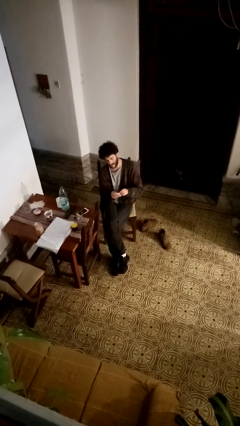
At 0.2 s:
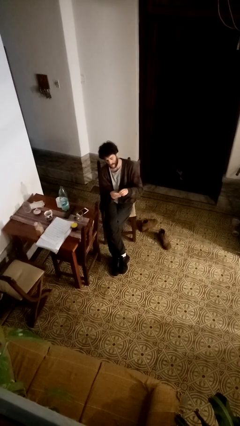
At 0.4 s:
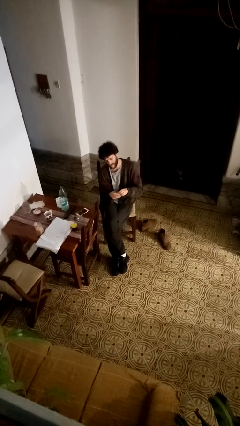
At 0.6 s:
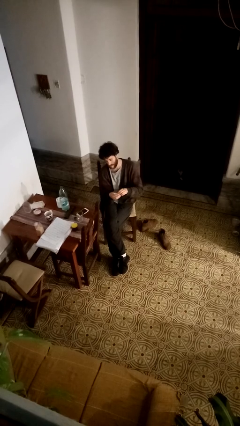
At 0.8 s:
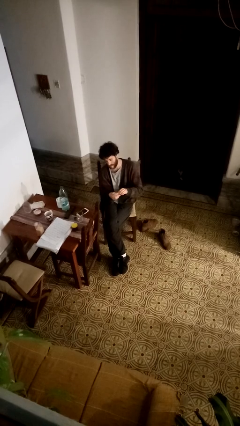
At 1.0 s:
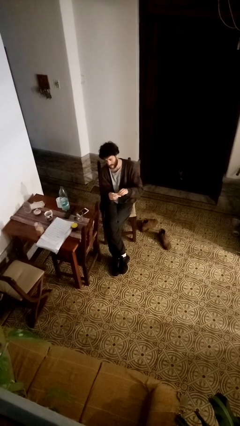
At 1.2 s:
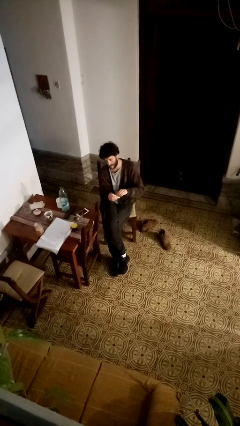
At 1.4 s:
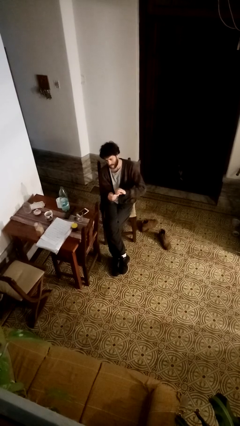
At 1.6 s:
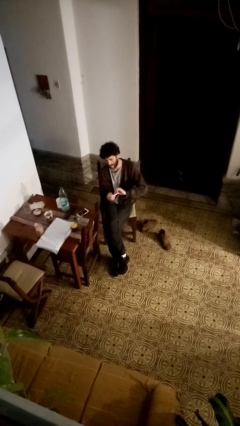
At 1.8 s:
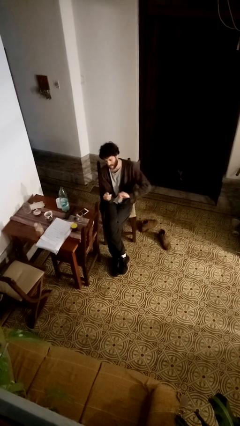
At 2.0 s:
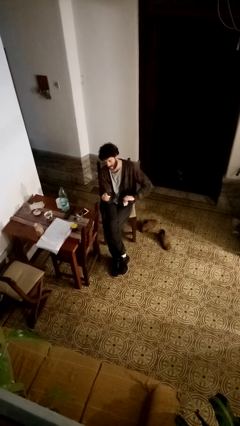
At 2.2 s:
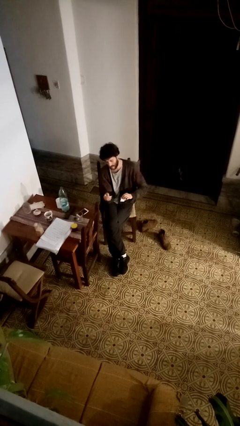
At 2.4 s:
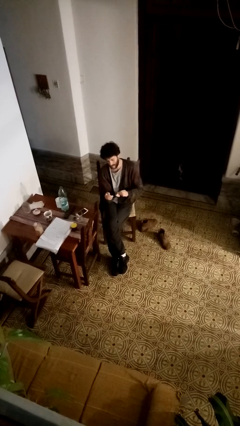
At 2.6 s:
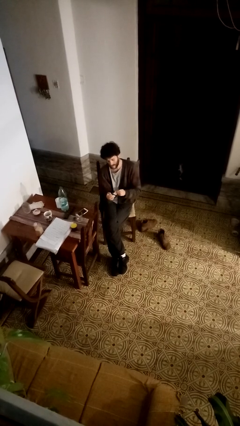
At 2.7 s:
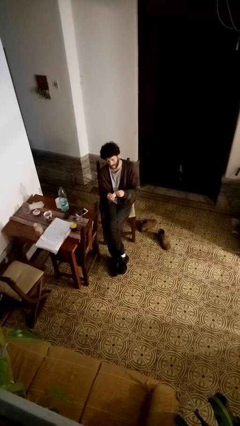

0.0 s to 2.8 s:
person tears paper

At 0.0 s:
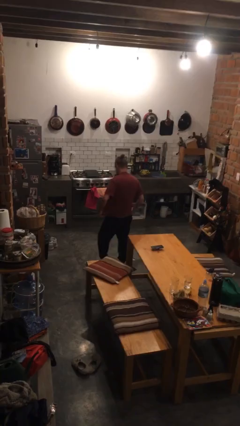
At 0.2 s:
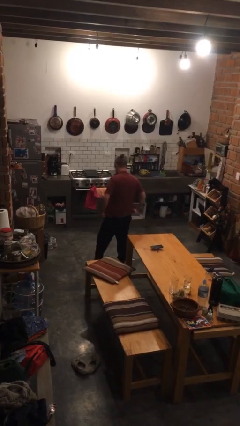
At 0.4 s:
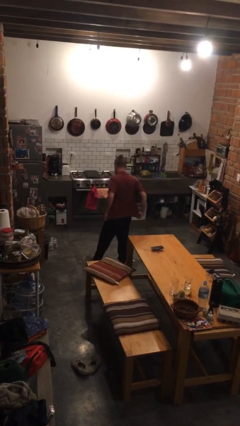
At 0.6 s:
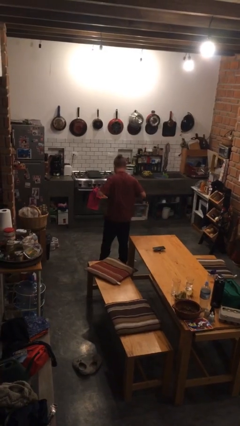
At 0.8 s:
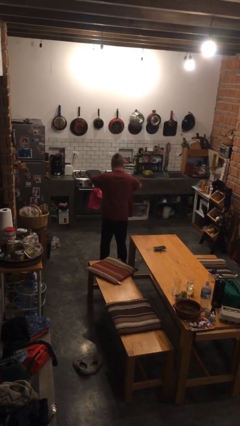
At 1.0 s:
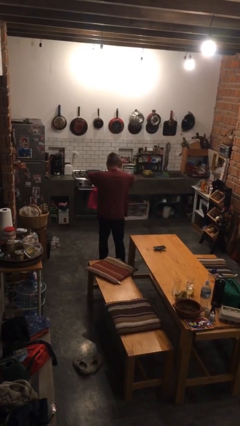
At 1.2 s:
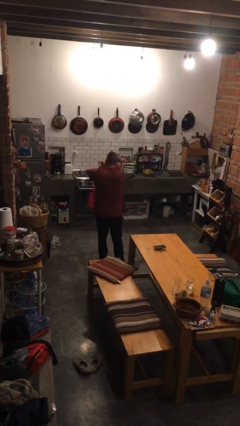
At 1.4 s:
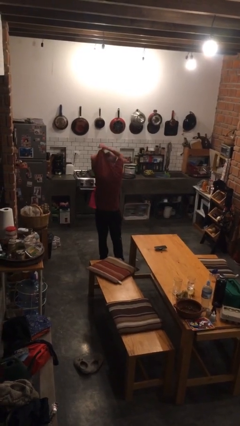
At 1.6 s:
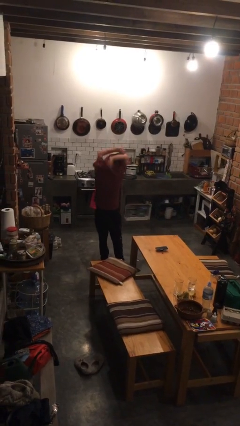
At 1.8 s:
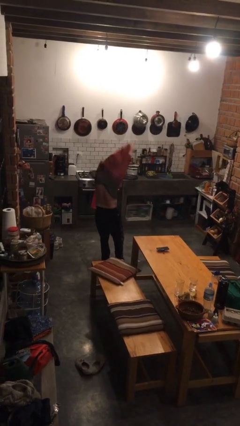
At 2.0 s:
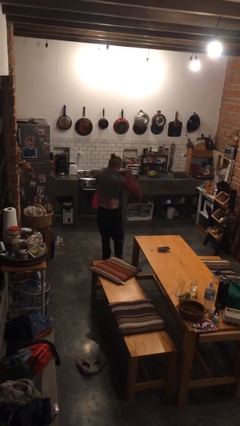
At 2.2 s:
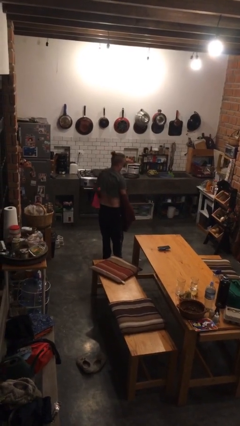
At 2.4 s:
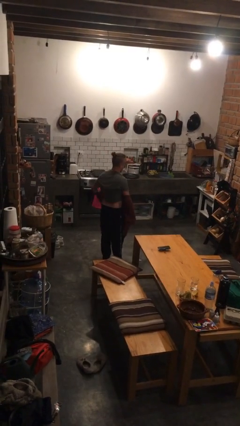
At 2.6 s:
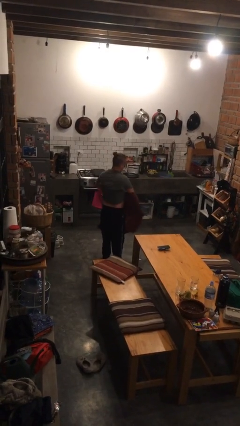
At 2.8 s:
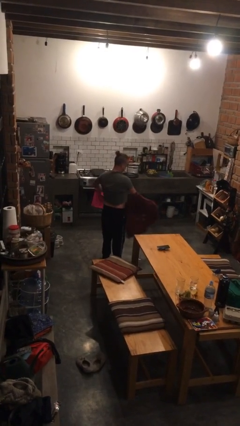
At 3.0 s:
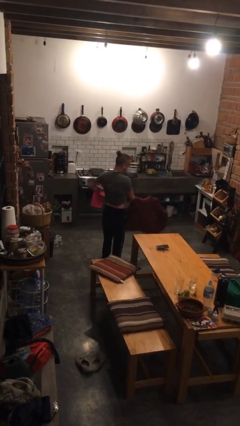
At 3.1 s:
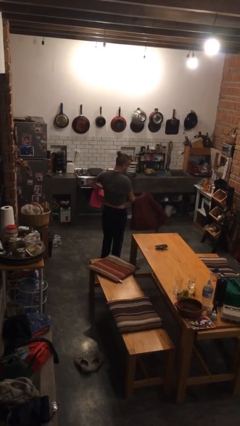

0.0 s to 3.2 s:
person takes off shirt

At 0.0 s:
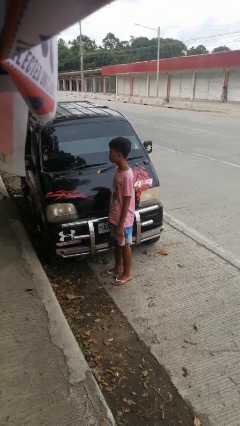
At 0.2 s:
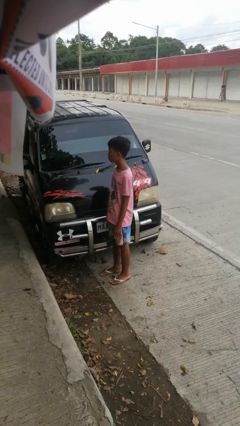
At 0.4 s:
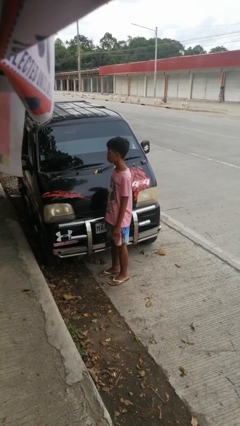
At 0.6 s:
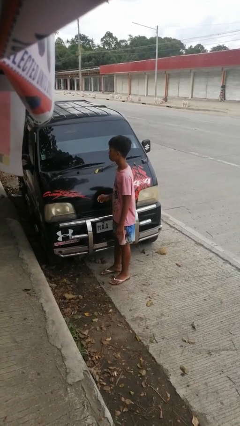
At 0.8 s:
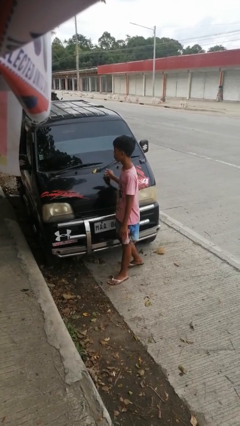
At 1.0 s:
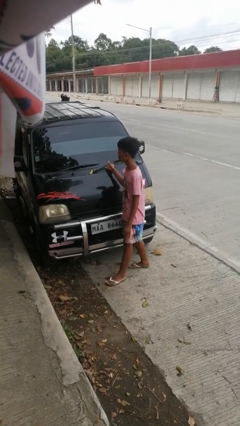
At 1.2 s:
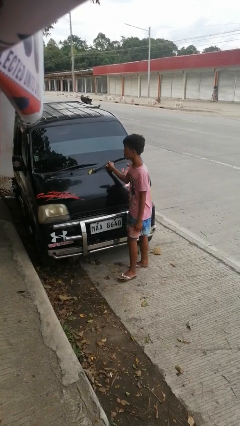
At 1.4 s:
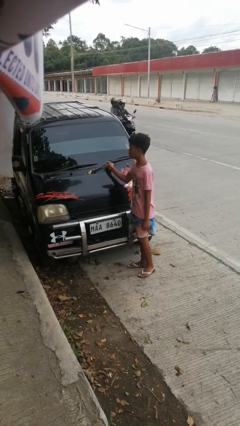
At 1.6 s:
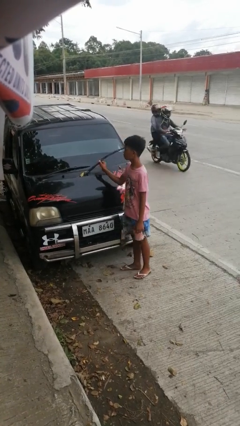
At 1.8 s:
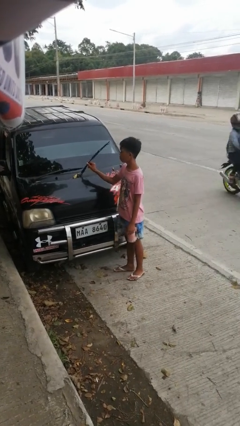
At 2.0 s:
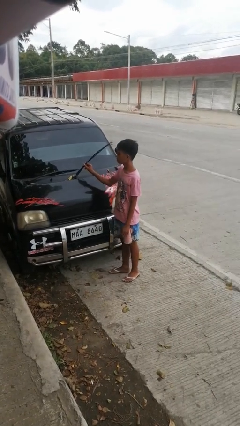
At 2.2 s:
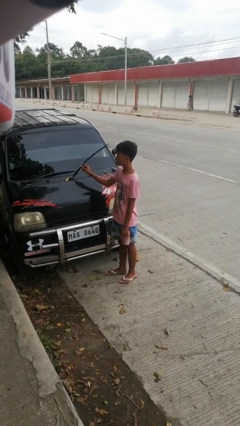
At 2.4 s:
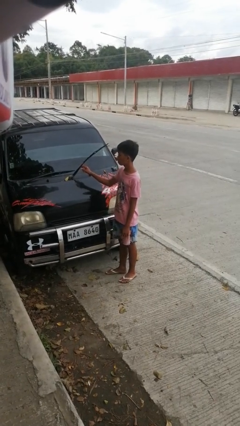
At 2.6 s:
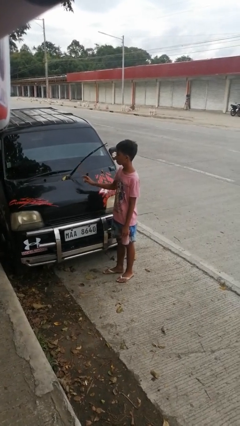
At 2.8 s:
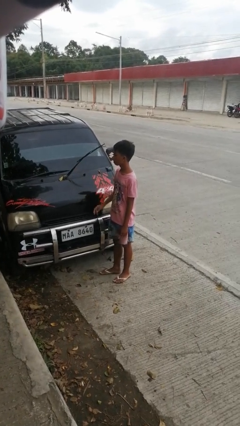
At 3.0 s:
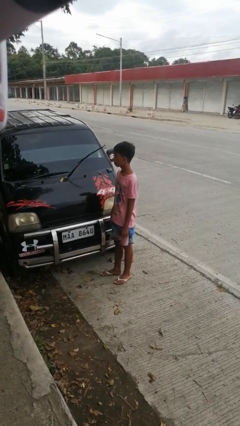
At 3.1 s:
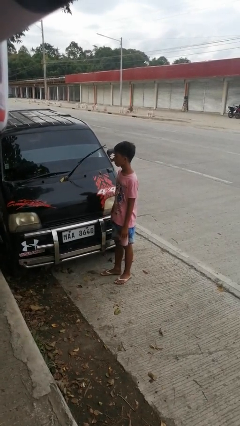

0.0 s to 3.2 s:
person flips up car wipers

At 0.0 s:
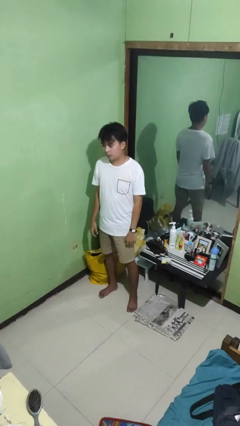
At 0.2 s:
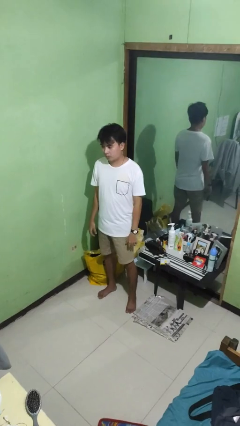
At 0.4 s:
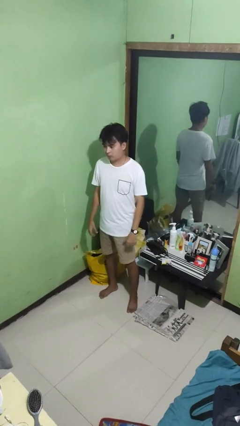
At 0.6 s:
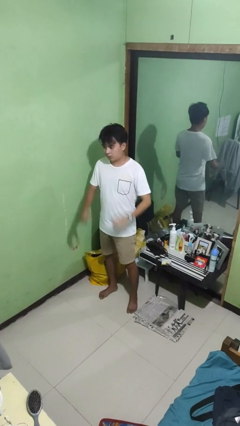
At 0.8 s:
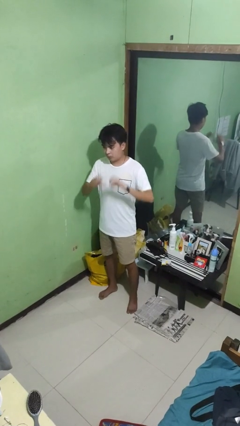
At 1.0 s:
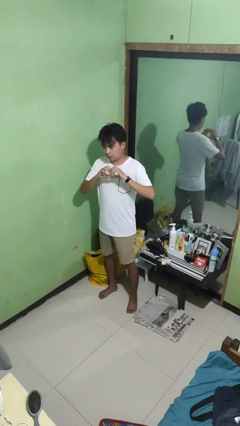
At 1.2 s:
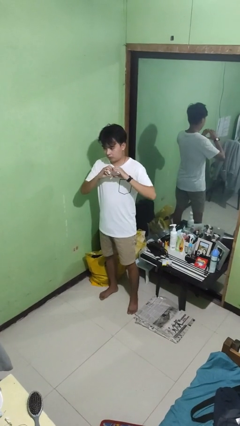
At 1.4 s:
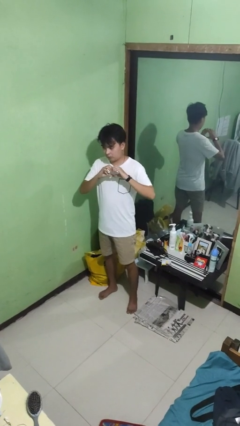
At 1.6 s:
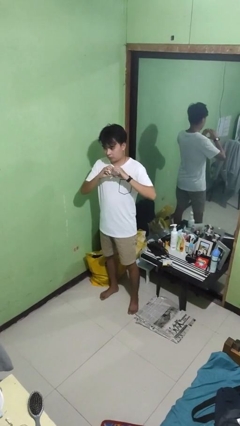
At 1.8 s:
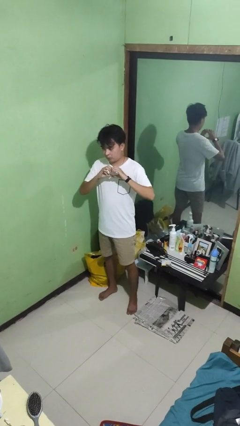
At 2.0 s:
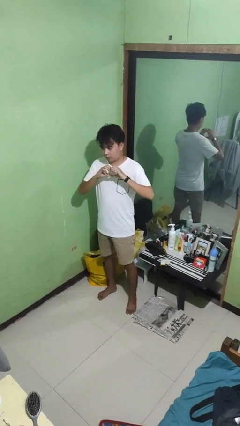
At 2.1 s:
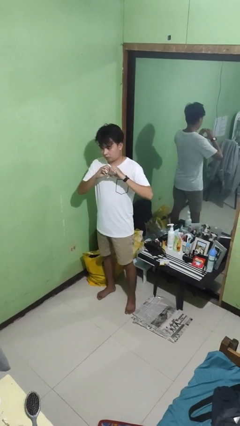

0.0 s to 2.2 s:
person gestures heart

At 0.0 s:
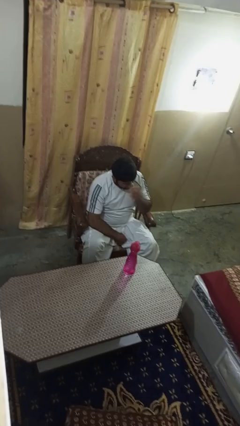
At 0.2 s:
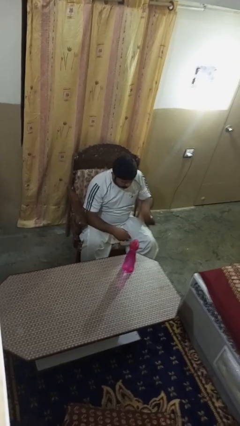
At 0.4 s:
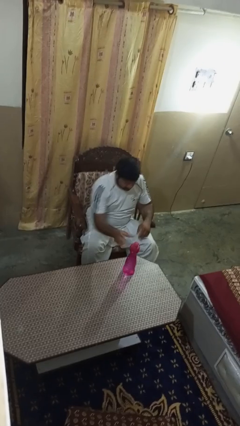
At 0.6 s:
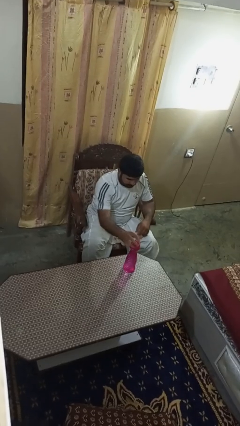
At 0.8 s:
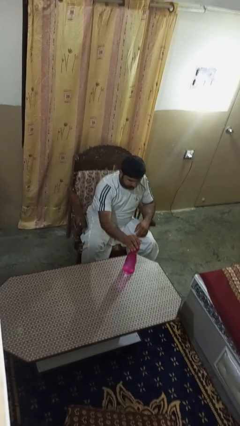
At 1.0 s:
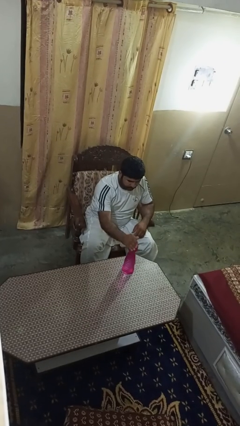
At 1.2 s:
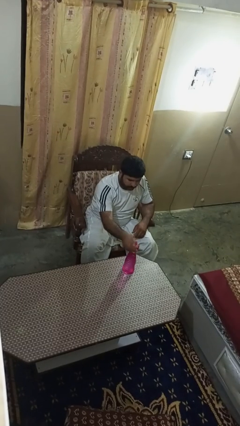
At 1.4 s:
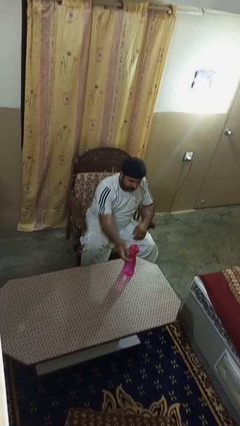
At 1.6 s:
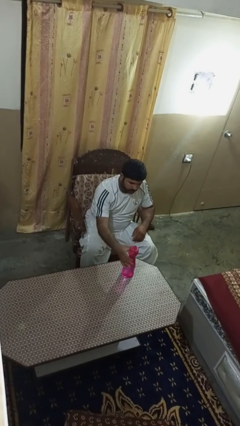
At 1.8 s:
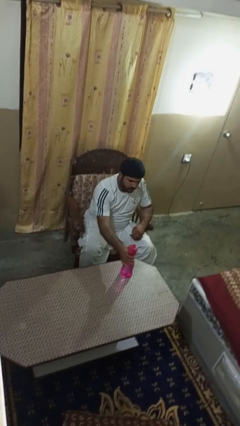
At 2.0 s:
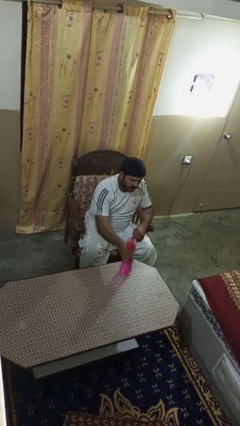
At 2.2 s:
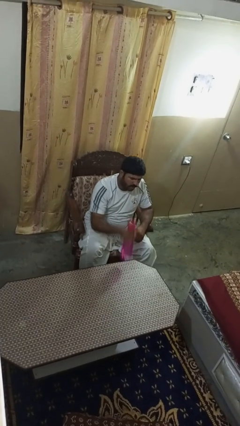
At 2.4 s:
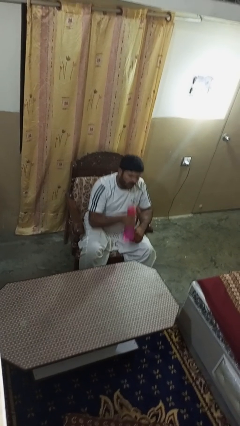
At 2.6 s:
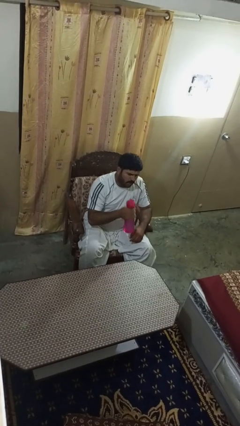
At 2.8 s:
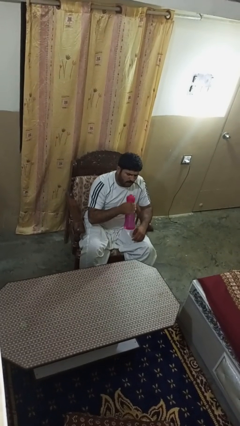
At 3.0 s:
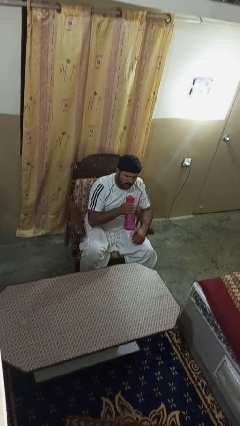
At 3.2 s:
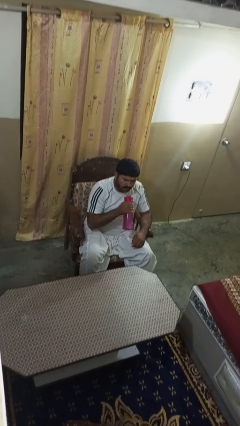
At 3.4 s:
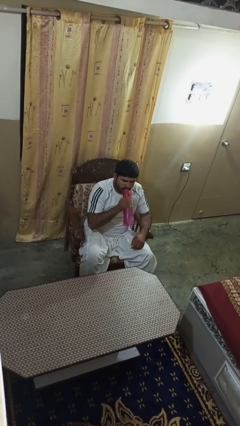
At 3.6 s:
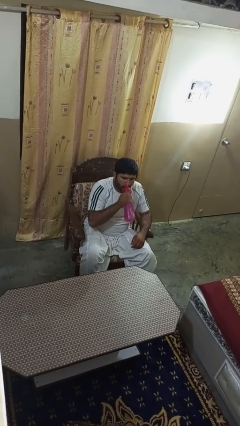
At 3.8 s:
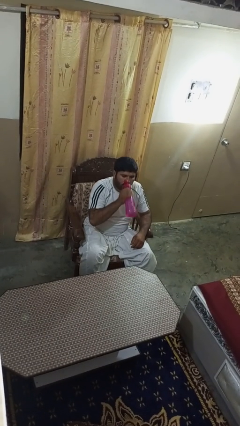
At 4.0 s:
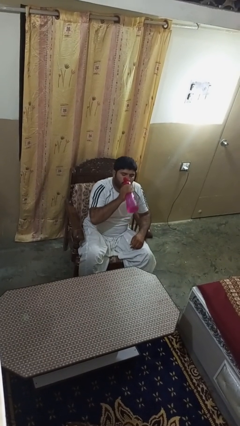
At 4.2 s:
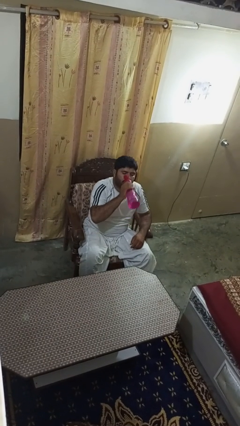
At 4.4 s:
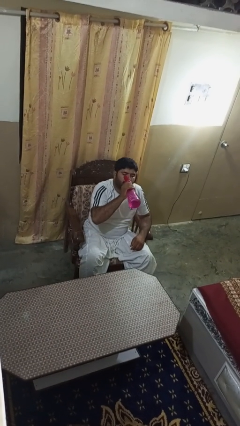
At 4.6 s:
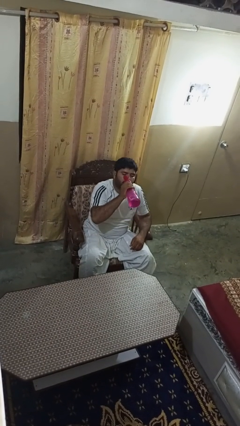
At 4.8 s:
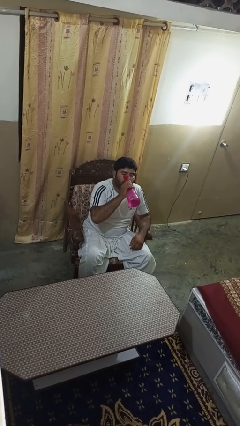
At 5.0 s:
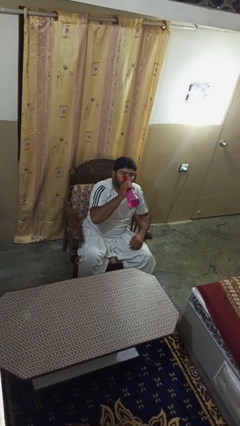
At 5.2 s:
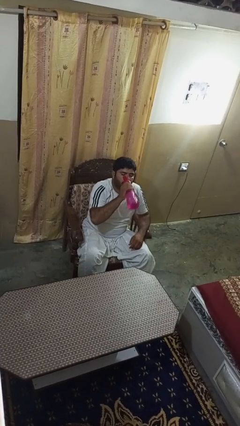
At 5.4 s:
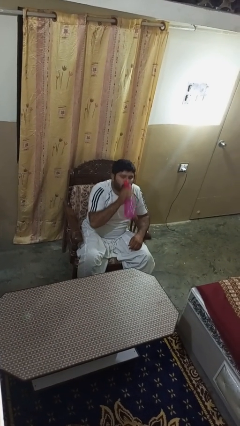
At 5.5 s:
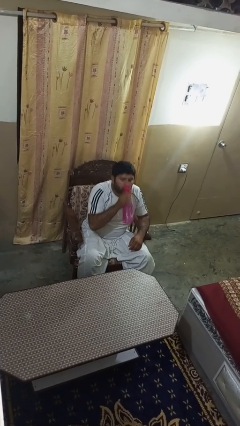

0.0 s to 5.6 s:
person drinks from bottle

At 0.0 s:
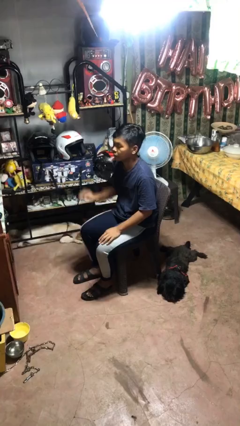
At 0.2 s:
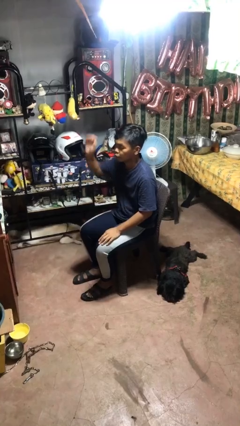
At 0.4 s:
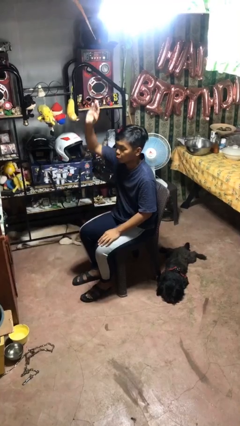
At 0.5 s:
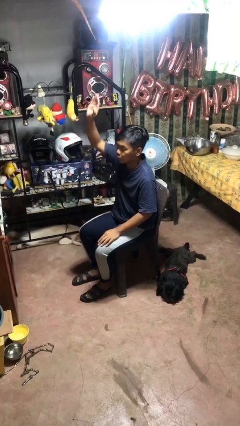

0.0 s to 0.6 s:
person gestures raise hand

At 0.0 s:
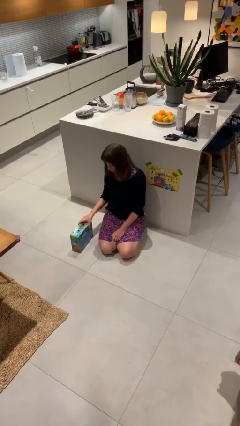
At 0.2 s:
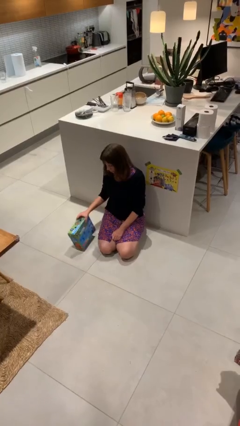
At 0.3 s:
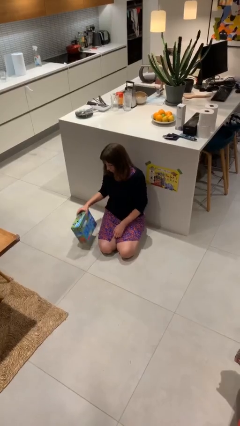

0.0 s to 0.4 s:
person picks up object from floor
